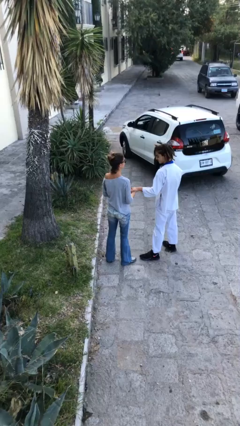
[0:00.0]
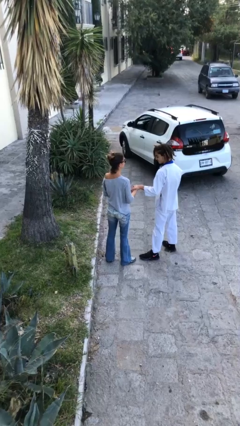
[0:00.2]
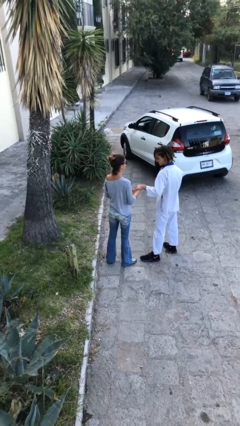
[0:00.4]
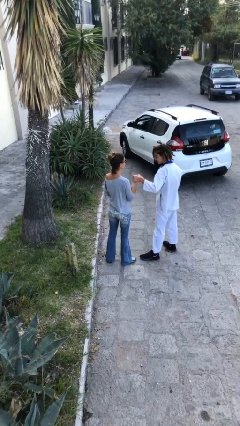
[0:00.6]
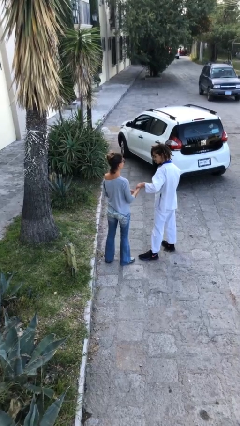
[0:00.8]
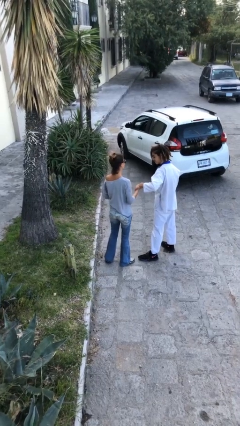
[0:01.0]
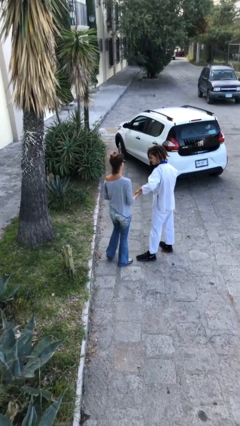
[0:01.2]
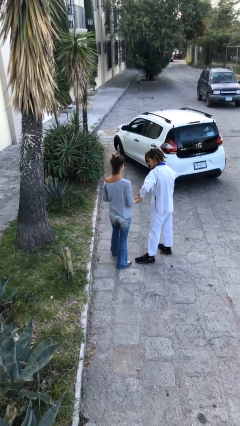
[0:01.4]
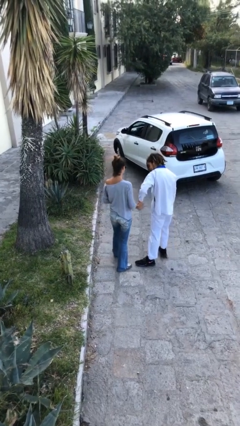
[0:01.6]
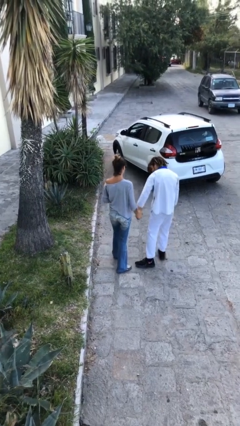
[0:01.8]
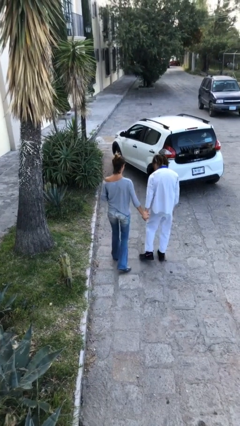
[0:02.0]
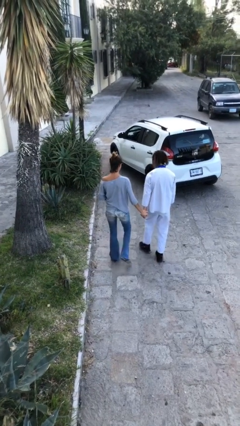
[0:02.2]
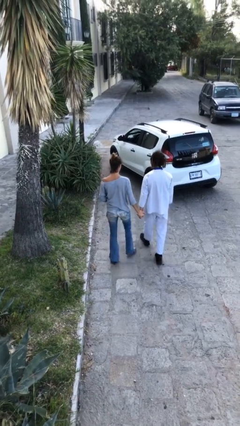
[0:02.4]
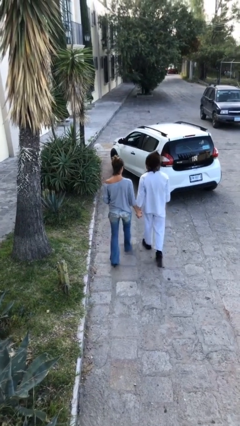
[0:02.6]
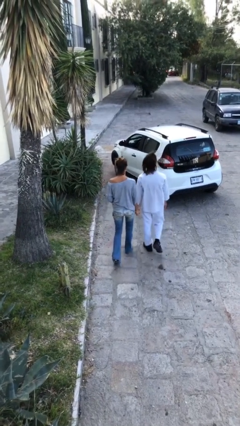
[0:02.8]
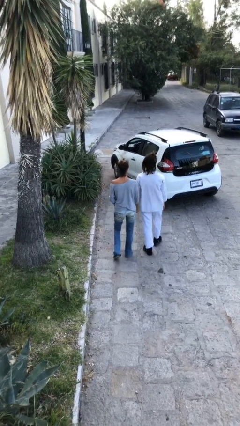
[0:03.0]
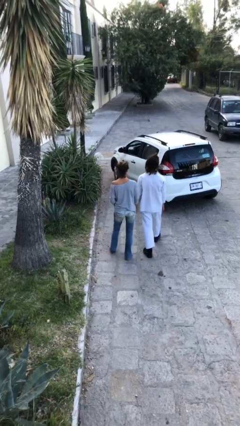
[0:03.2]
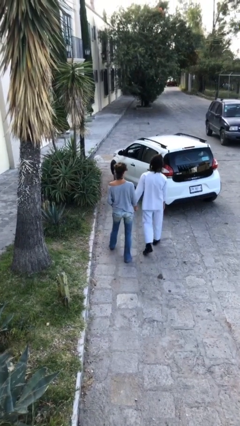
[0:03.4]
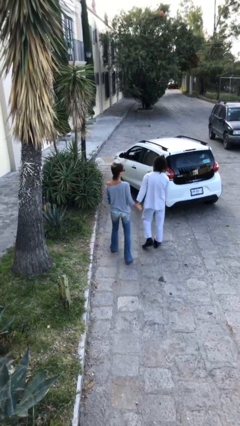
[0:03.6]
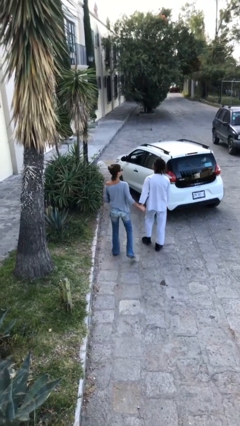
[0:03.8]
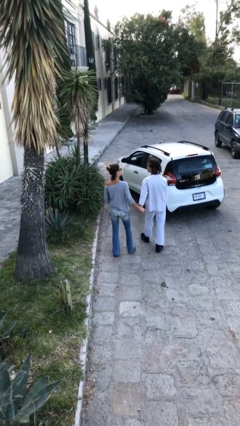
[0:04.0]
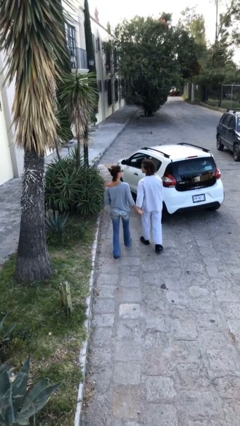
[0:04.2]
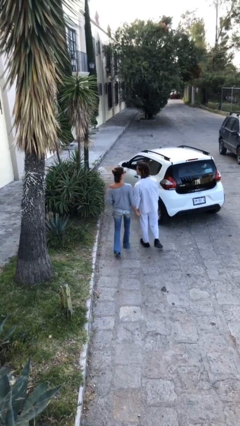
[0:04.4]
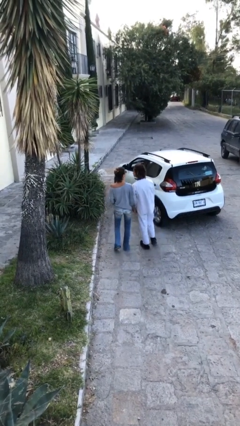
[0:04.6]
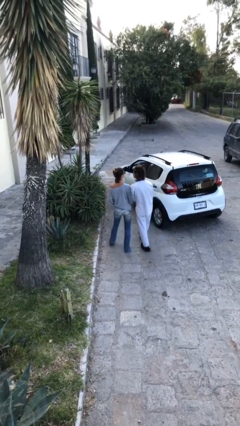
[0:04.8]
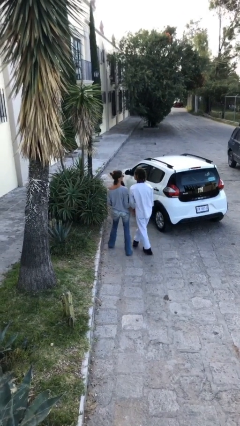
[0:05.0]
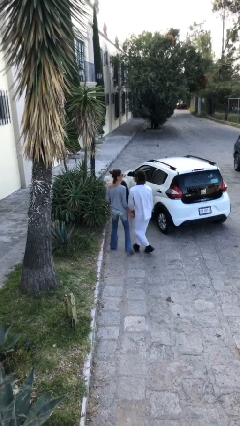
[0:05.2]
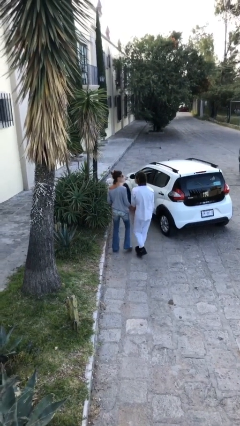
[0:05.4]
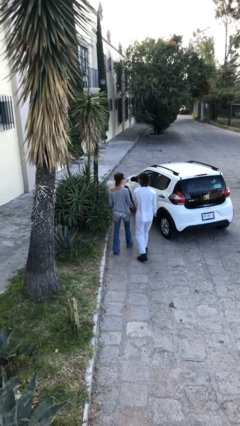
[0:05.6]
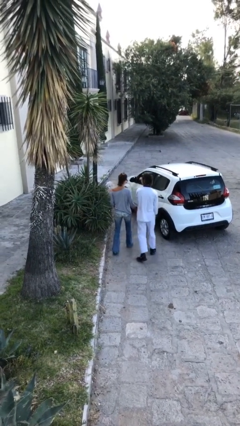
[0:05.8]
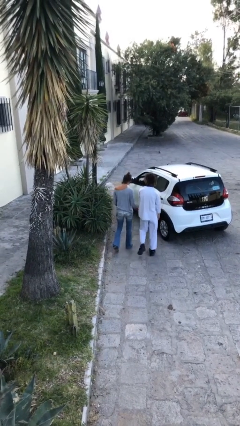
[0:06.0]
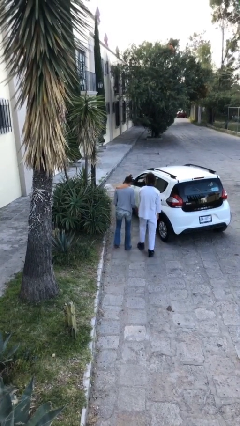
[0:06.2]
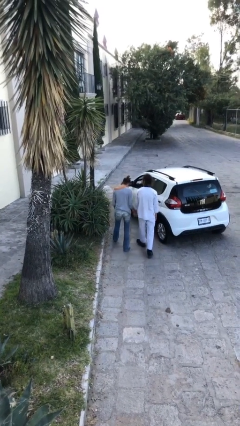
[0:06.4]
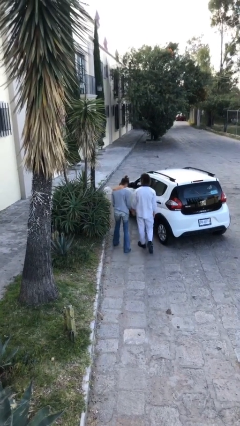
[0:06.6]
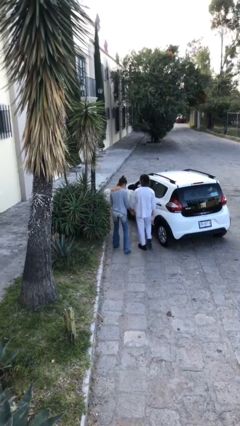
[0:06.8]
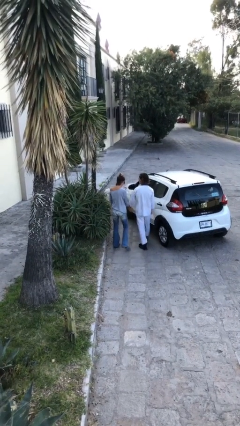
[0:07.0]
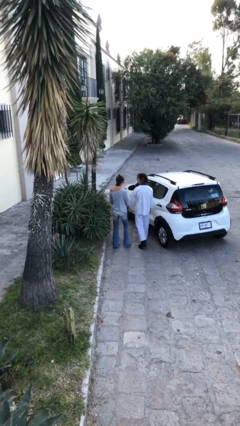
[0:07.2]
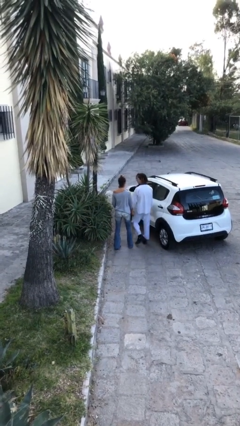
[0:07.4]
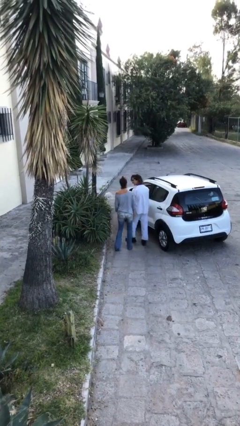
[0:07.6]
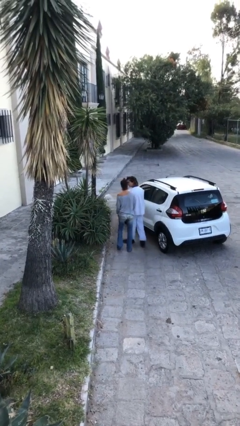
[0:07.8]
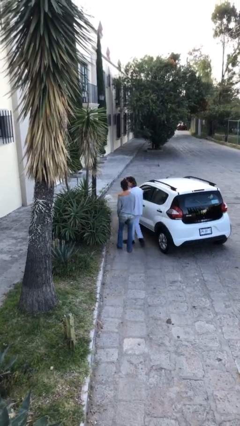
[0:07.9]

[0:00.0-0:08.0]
person holds hand

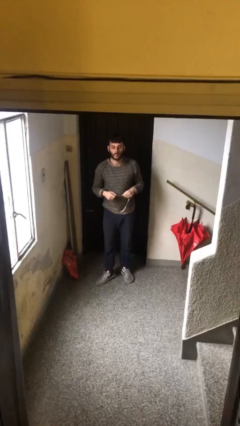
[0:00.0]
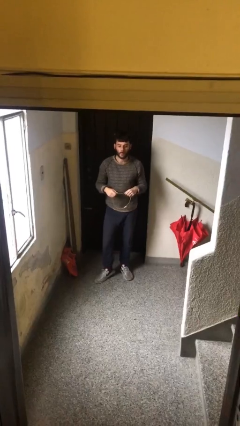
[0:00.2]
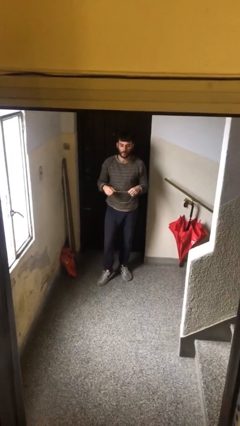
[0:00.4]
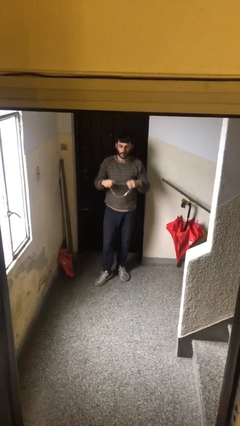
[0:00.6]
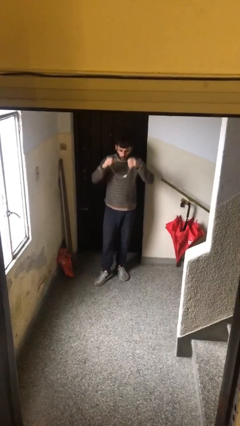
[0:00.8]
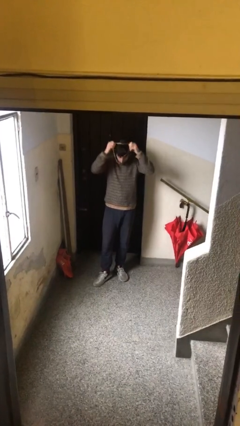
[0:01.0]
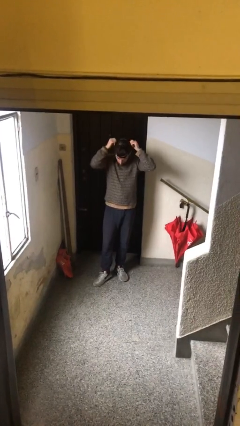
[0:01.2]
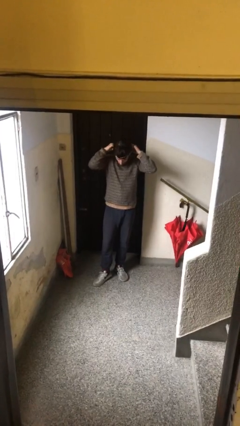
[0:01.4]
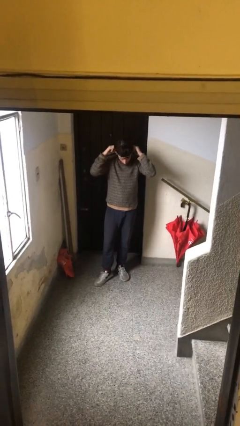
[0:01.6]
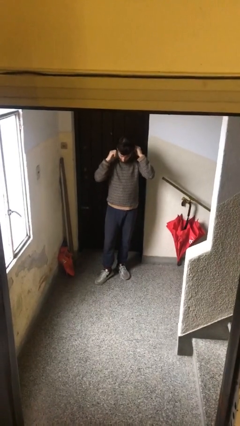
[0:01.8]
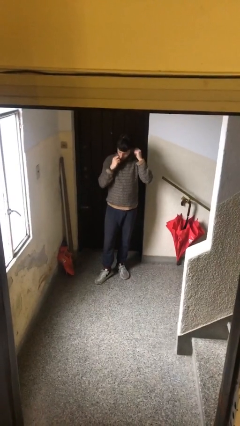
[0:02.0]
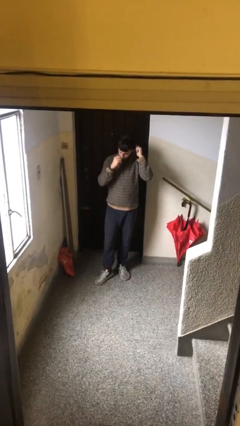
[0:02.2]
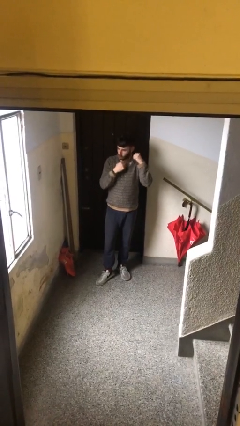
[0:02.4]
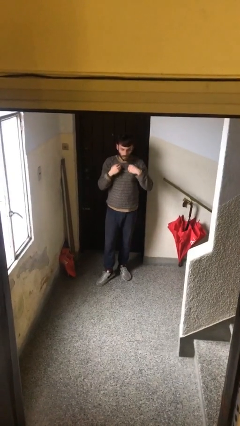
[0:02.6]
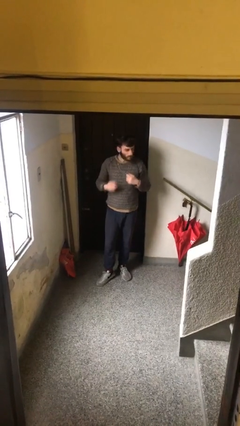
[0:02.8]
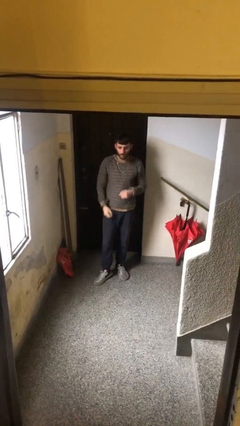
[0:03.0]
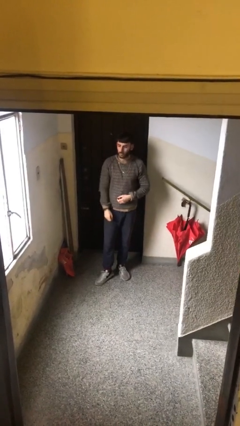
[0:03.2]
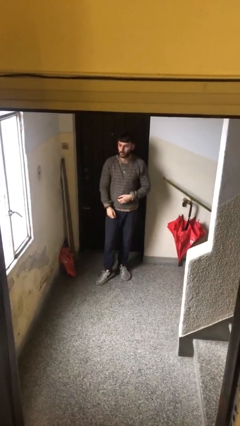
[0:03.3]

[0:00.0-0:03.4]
person puts on necklace

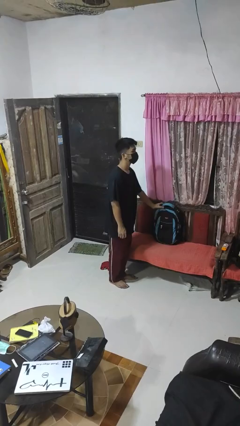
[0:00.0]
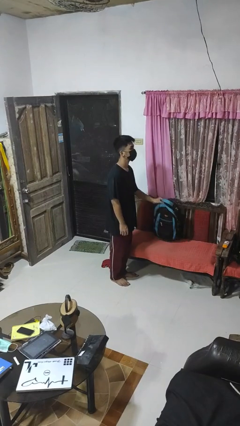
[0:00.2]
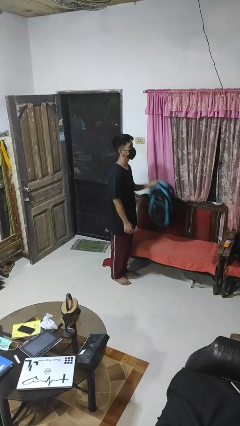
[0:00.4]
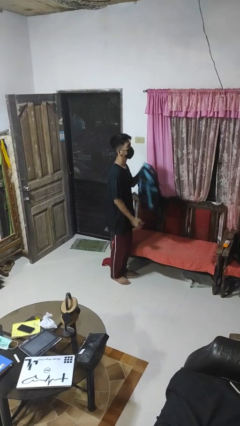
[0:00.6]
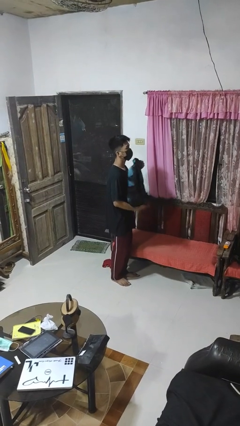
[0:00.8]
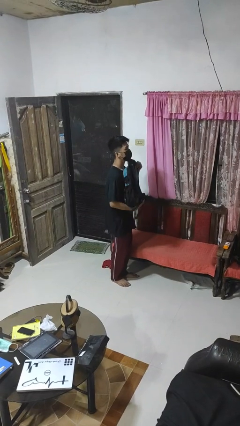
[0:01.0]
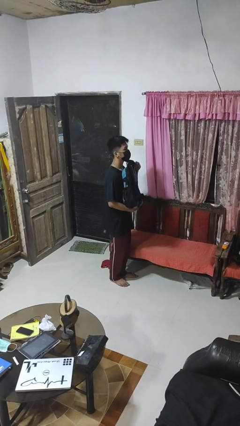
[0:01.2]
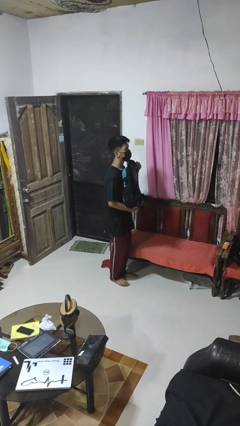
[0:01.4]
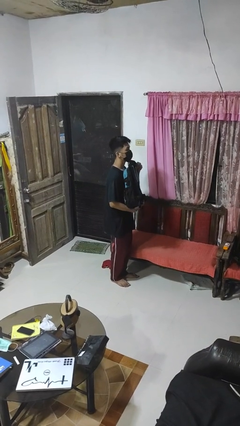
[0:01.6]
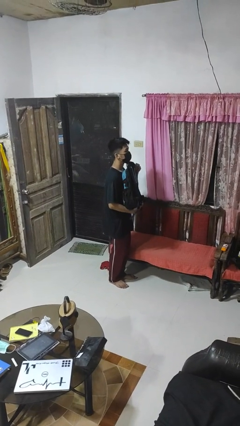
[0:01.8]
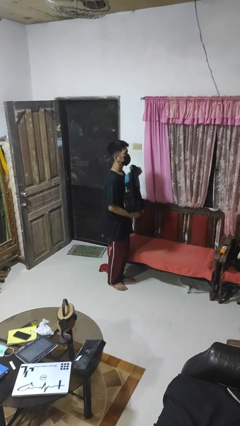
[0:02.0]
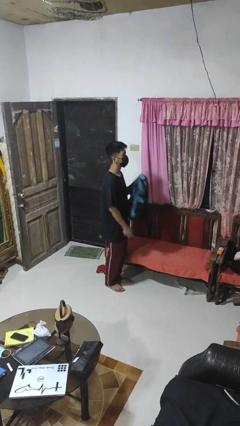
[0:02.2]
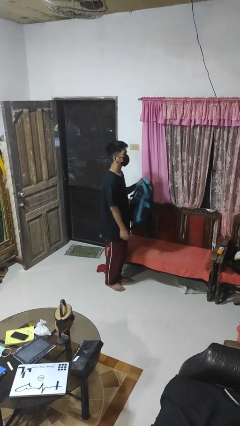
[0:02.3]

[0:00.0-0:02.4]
person picks up object from couch

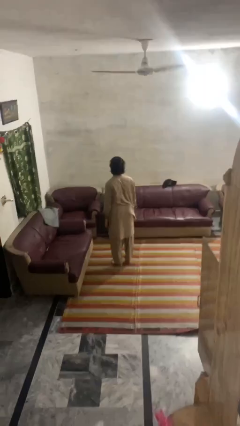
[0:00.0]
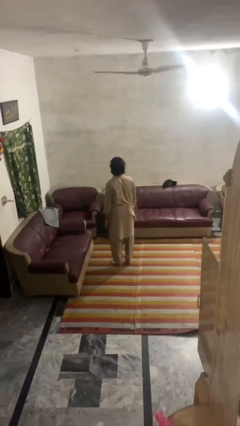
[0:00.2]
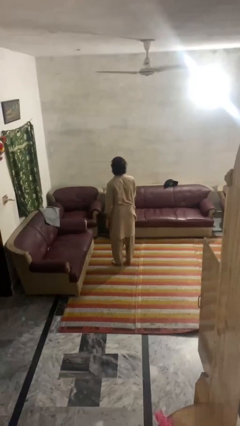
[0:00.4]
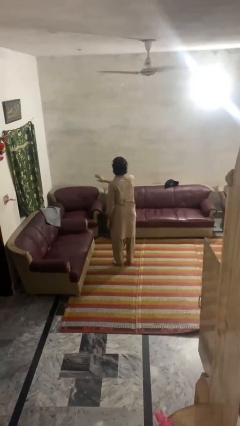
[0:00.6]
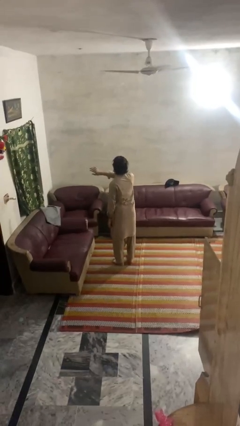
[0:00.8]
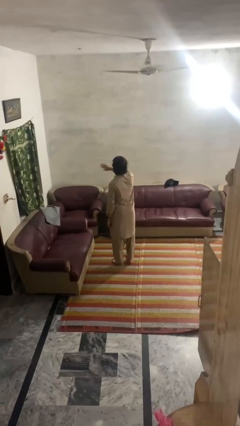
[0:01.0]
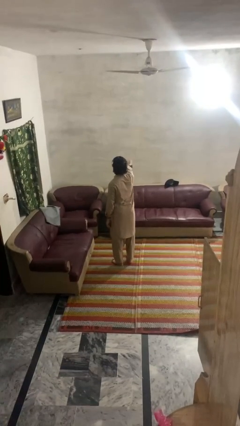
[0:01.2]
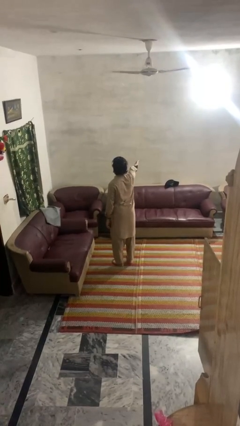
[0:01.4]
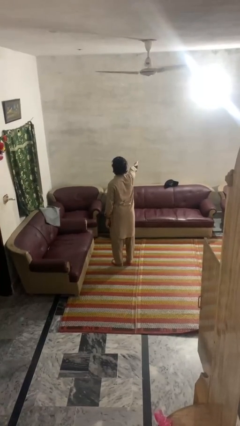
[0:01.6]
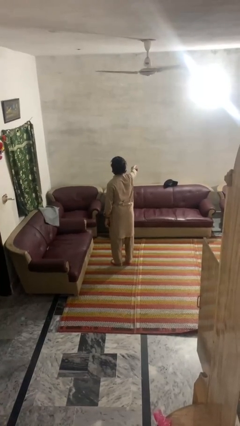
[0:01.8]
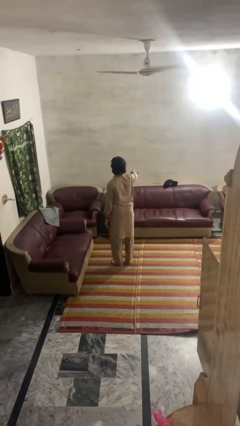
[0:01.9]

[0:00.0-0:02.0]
person gestures swipe right

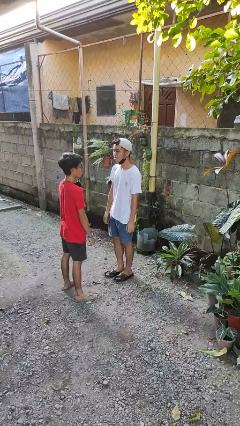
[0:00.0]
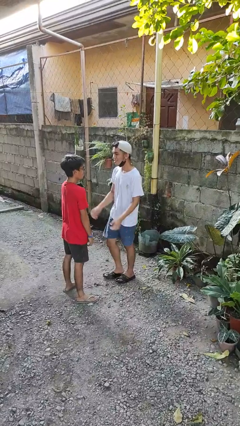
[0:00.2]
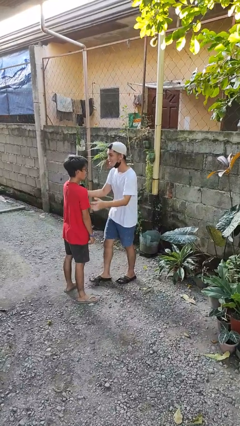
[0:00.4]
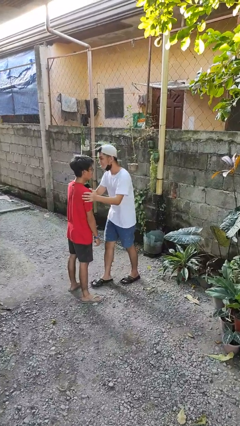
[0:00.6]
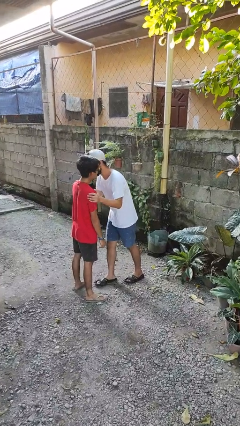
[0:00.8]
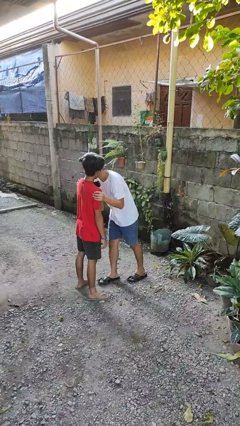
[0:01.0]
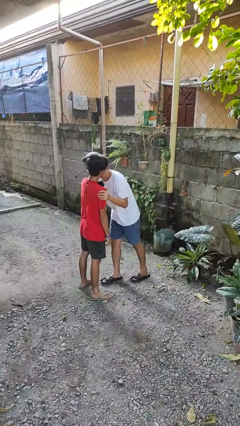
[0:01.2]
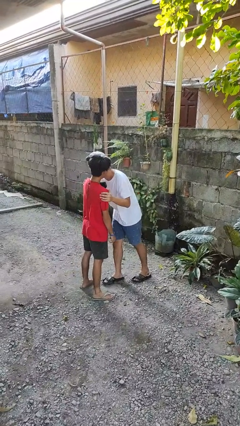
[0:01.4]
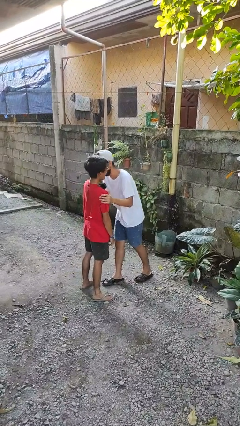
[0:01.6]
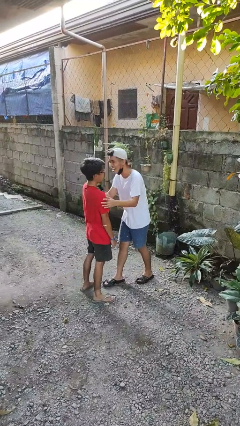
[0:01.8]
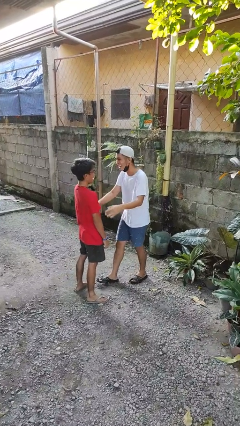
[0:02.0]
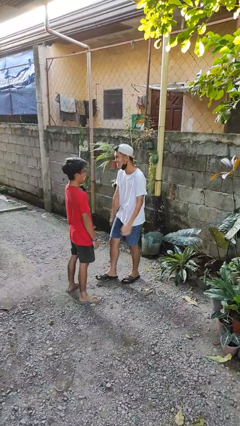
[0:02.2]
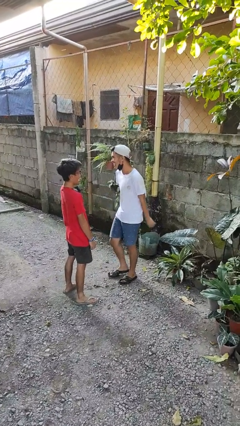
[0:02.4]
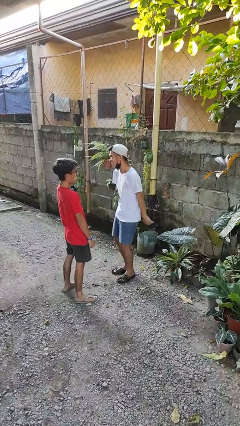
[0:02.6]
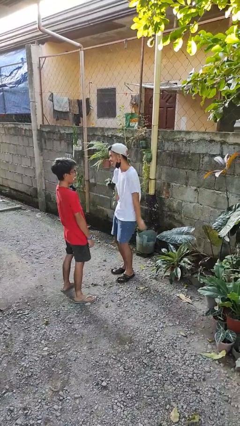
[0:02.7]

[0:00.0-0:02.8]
person kisses cheek of person
